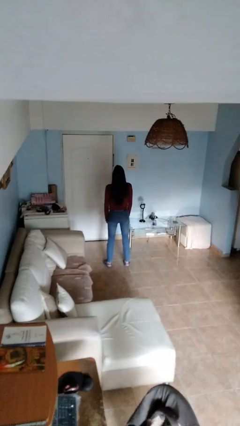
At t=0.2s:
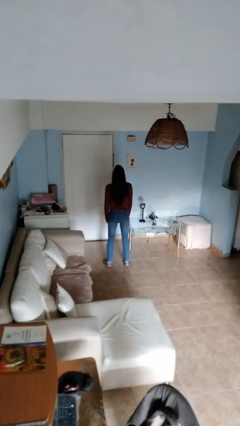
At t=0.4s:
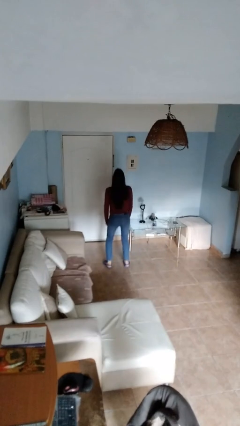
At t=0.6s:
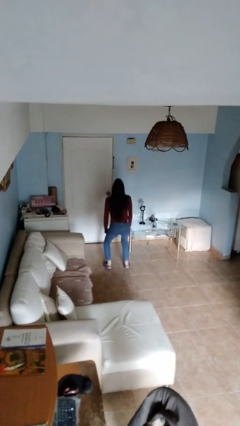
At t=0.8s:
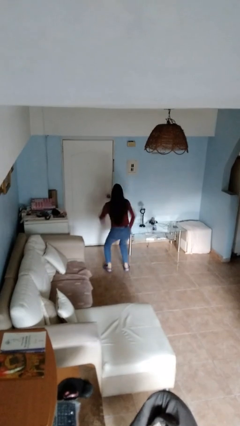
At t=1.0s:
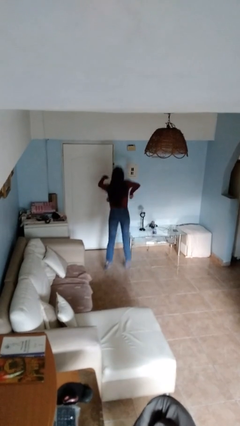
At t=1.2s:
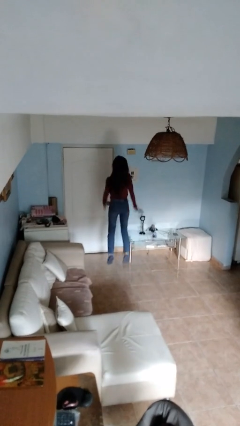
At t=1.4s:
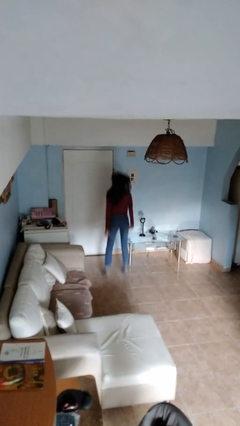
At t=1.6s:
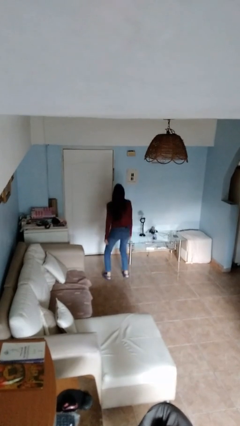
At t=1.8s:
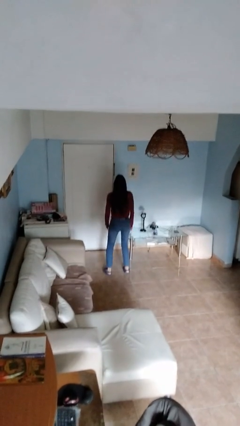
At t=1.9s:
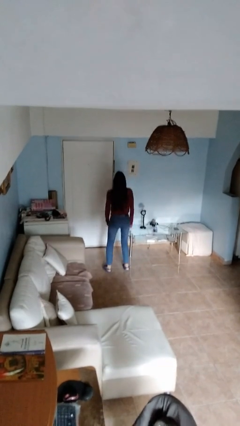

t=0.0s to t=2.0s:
person jumps

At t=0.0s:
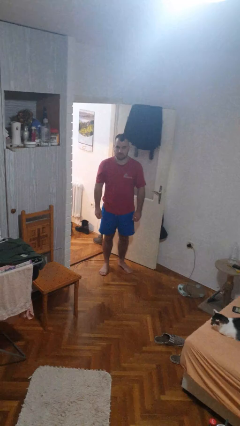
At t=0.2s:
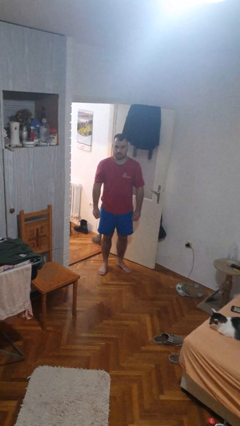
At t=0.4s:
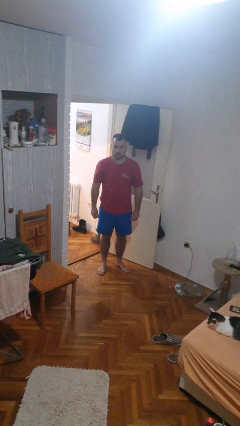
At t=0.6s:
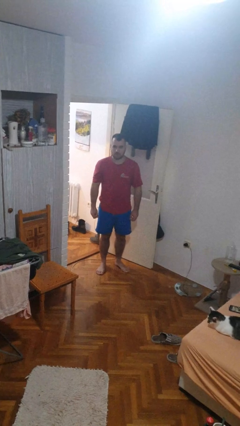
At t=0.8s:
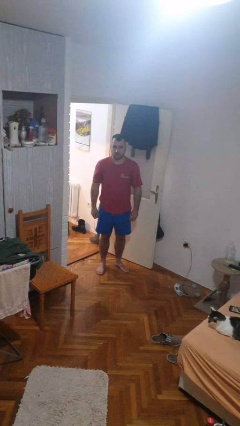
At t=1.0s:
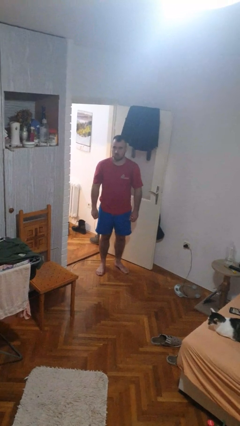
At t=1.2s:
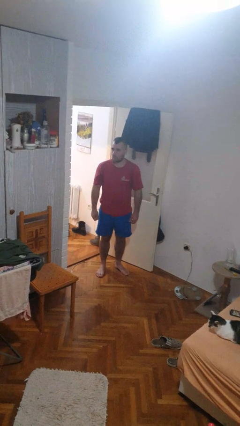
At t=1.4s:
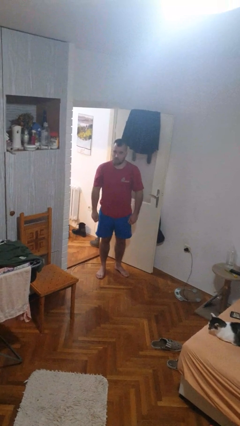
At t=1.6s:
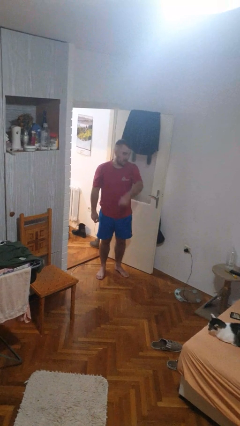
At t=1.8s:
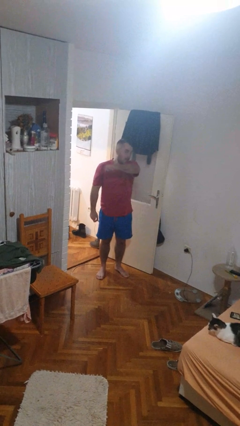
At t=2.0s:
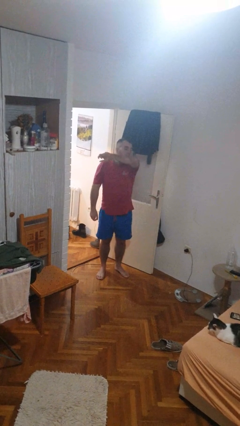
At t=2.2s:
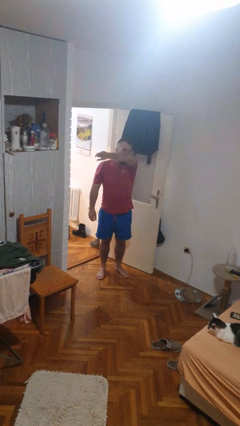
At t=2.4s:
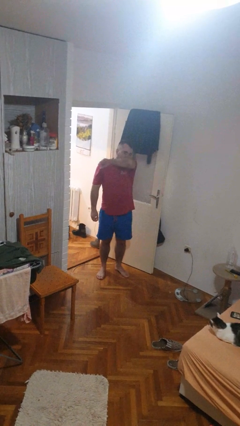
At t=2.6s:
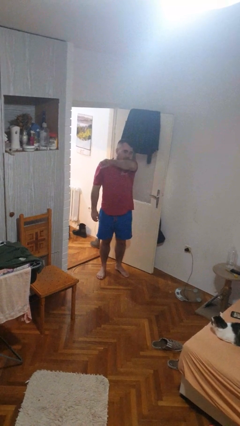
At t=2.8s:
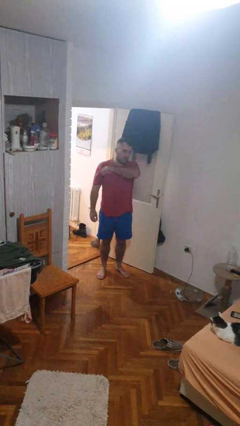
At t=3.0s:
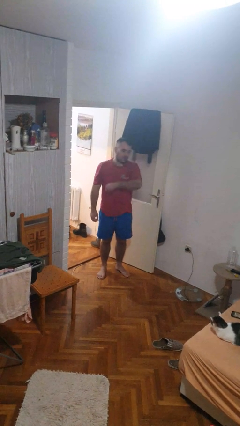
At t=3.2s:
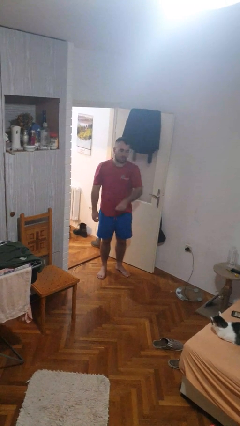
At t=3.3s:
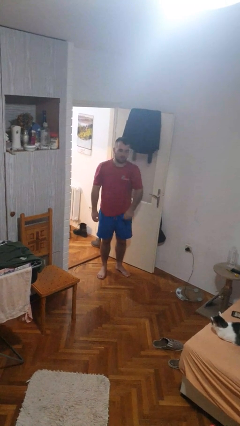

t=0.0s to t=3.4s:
person sneezes into arm

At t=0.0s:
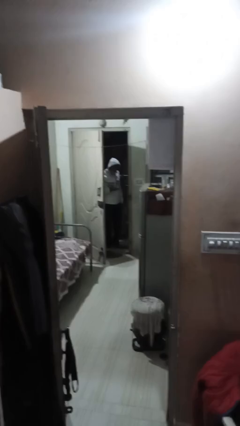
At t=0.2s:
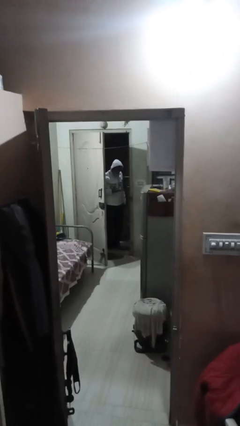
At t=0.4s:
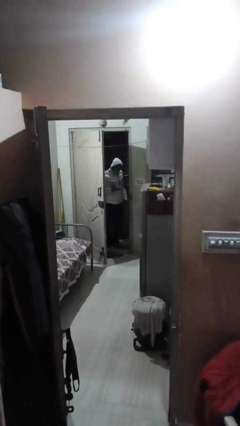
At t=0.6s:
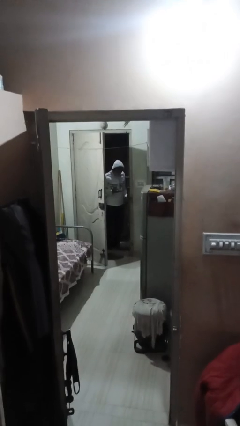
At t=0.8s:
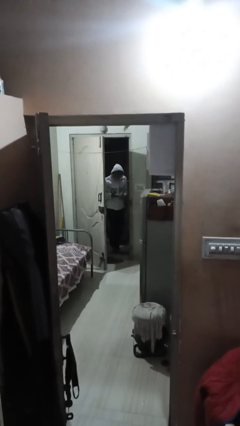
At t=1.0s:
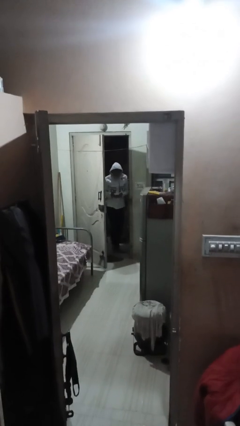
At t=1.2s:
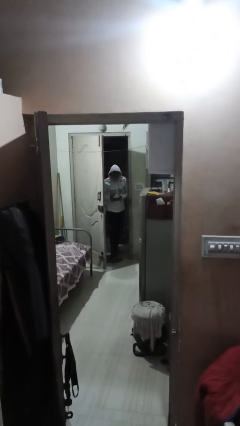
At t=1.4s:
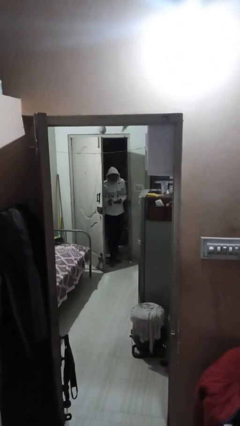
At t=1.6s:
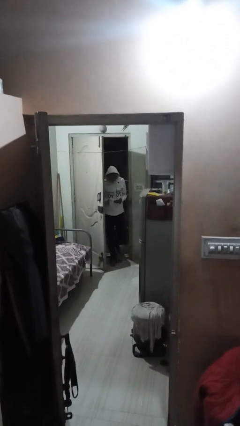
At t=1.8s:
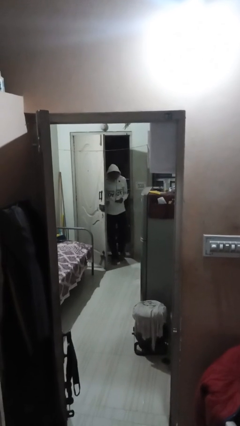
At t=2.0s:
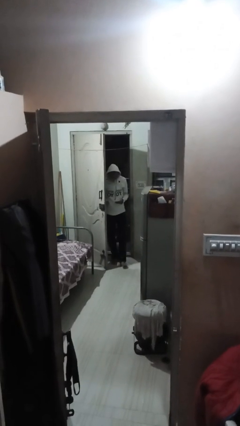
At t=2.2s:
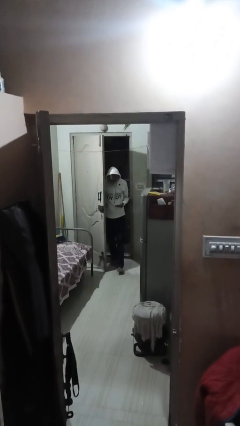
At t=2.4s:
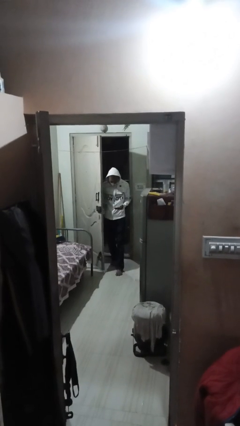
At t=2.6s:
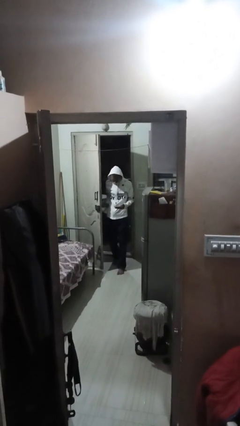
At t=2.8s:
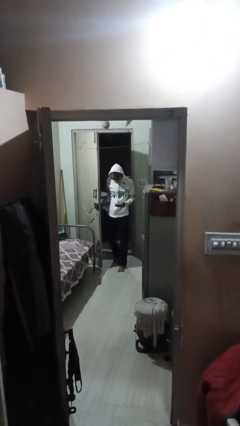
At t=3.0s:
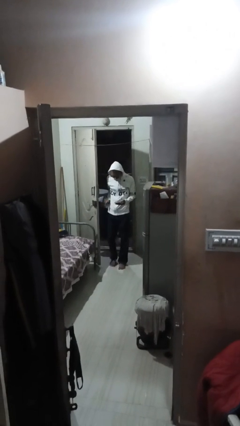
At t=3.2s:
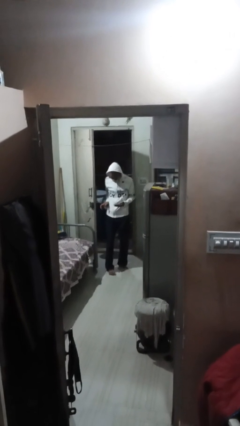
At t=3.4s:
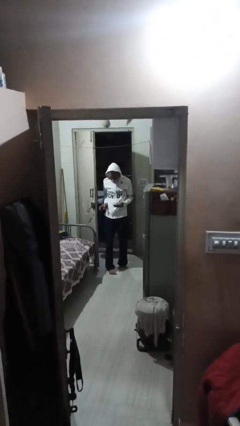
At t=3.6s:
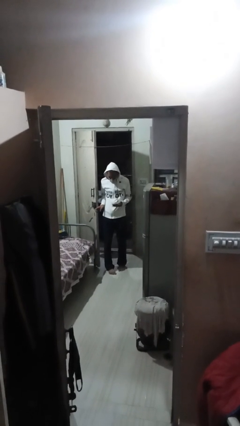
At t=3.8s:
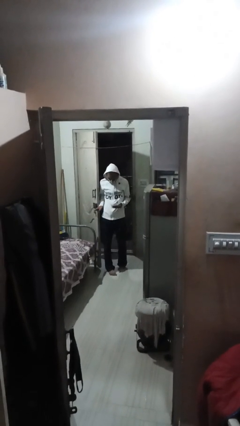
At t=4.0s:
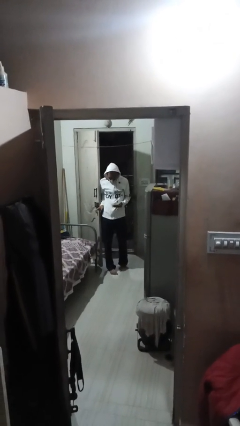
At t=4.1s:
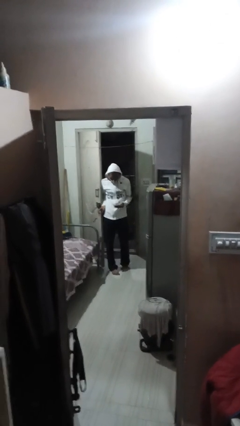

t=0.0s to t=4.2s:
person enters scene through structure

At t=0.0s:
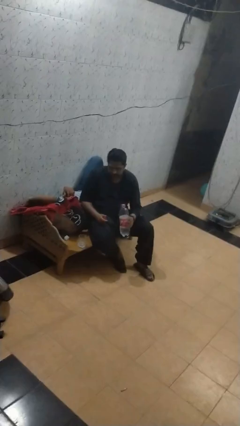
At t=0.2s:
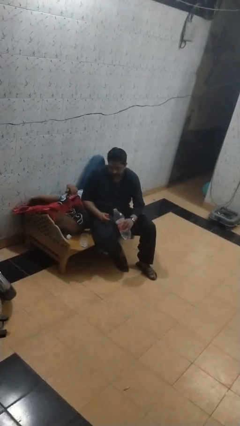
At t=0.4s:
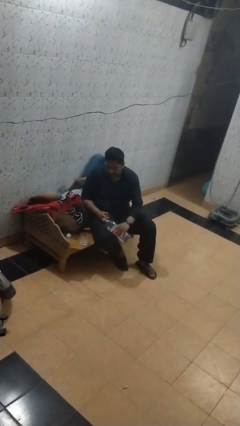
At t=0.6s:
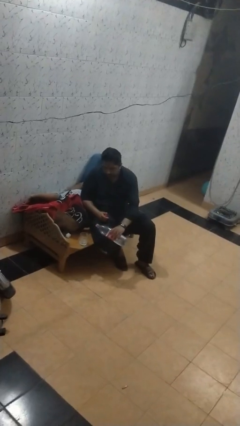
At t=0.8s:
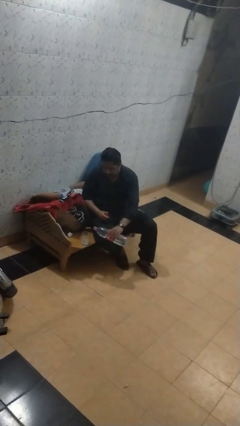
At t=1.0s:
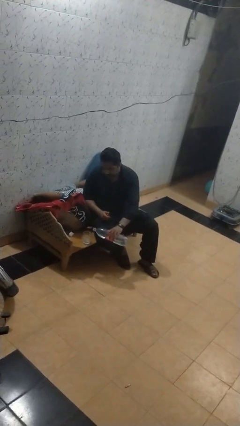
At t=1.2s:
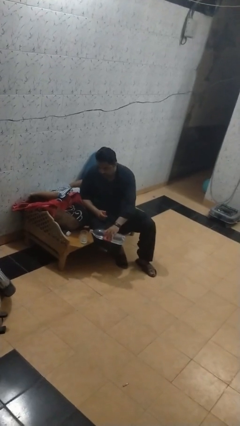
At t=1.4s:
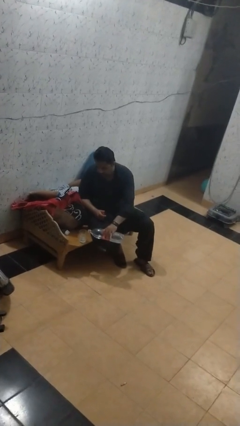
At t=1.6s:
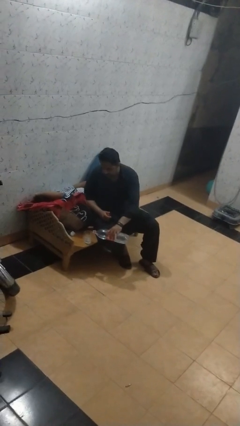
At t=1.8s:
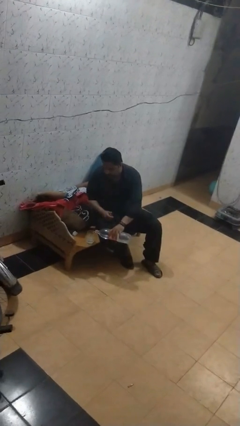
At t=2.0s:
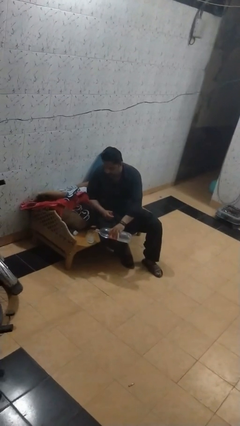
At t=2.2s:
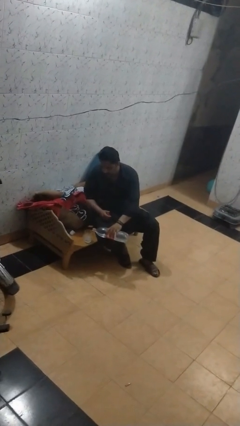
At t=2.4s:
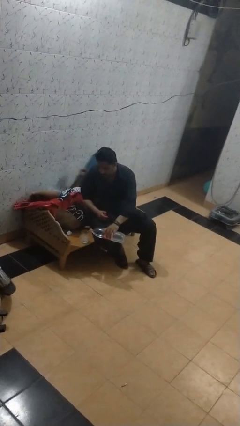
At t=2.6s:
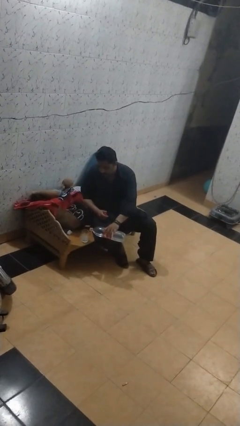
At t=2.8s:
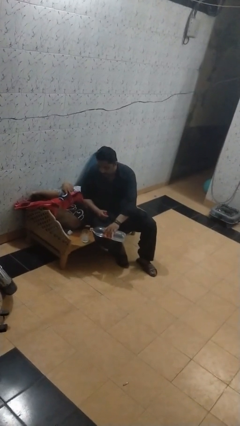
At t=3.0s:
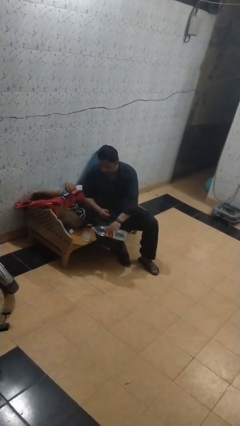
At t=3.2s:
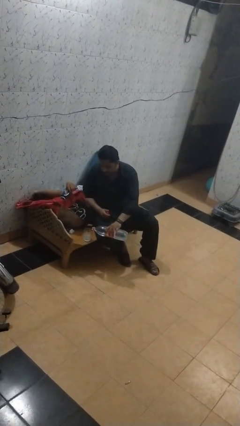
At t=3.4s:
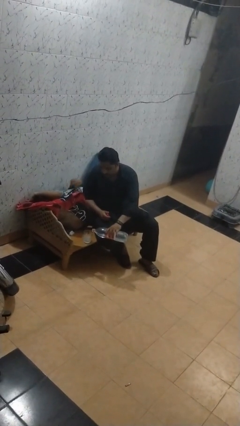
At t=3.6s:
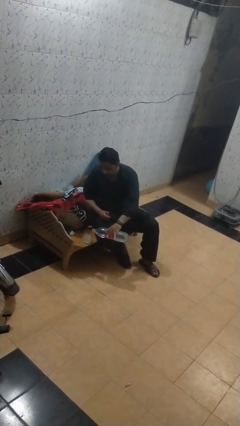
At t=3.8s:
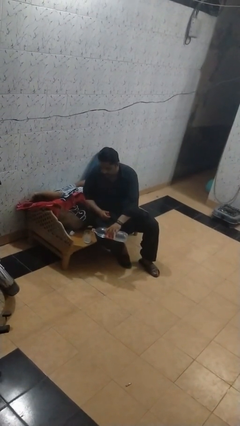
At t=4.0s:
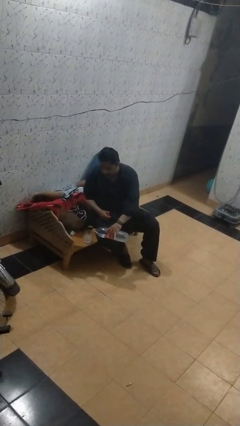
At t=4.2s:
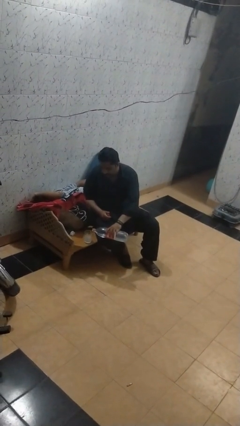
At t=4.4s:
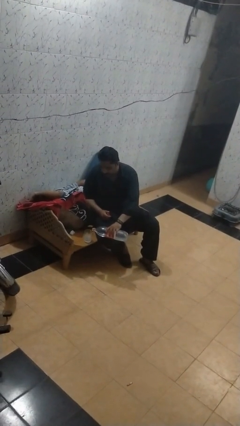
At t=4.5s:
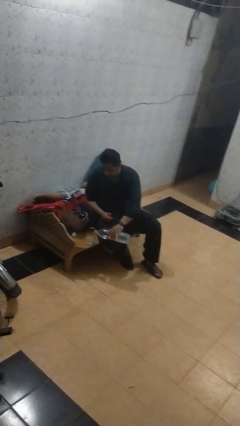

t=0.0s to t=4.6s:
person pours liquid into cup

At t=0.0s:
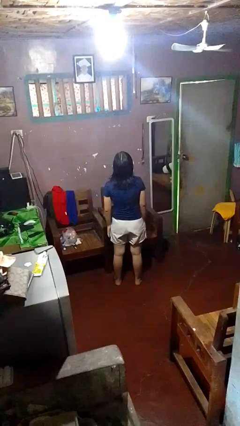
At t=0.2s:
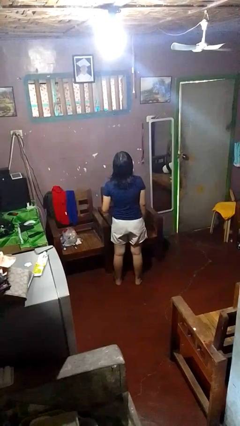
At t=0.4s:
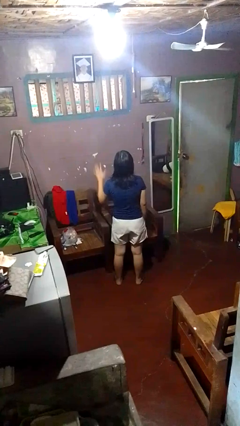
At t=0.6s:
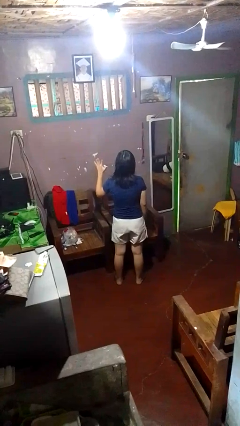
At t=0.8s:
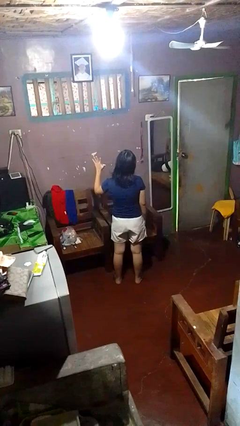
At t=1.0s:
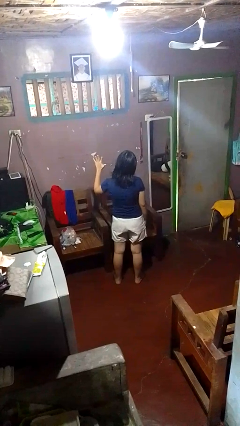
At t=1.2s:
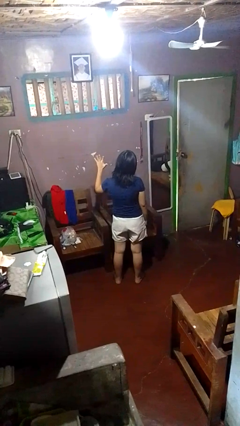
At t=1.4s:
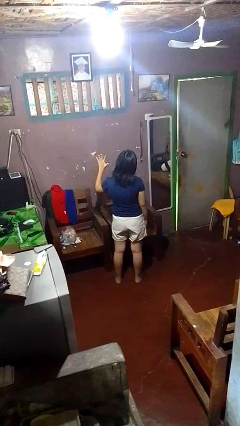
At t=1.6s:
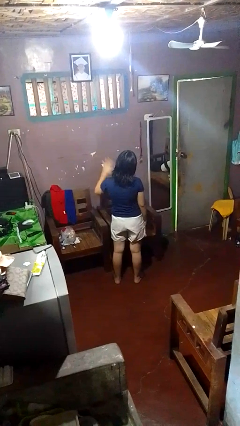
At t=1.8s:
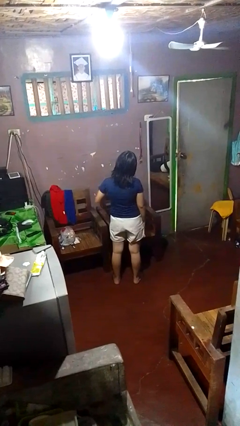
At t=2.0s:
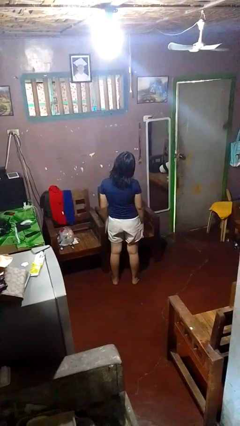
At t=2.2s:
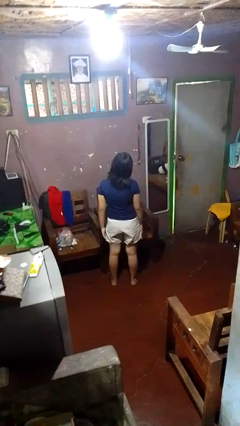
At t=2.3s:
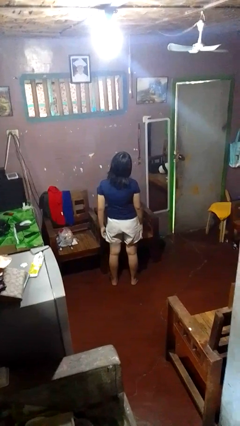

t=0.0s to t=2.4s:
person gestures number five

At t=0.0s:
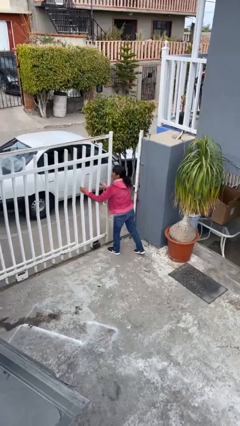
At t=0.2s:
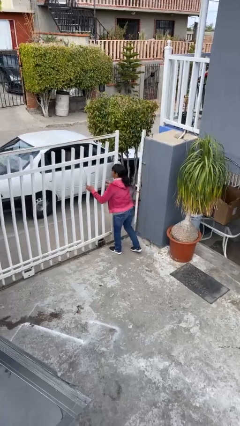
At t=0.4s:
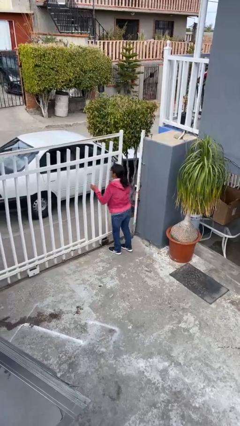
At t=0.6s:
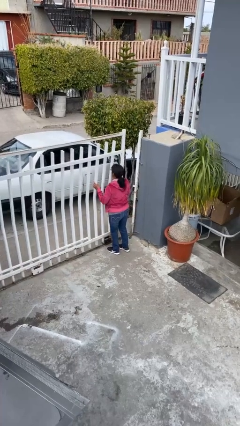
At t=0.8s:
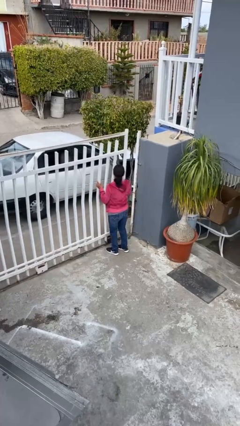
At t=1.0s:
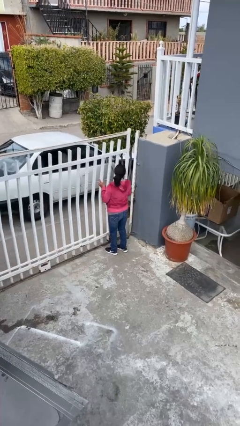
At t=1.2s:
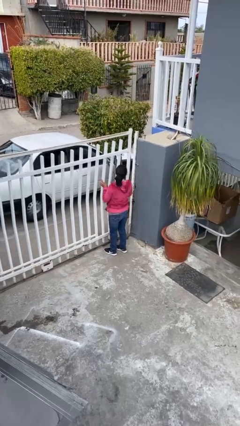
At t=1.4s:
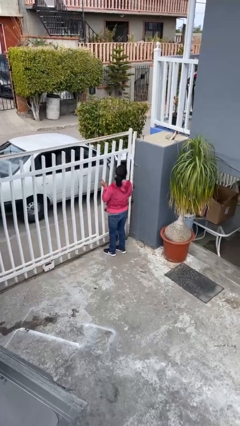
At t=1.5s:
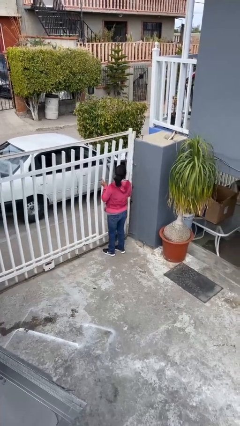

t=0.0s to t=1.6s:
person closes facility door
